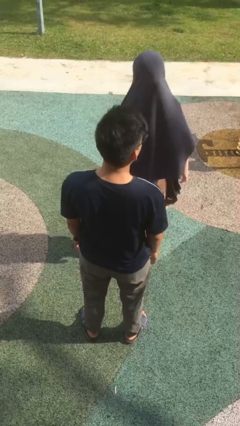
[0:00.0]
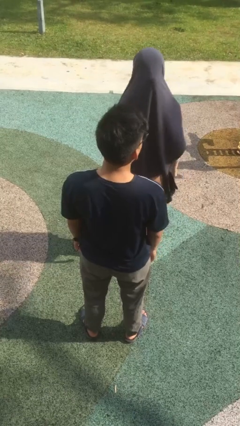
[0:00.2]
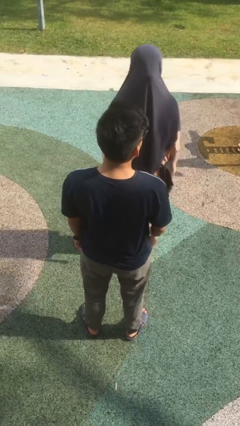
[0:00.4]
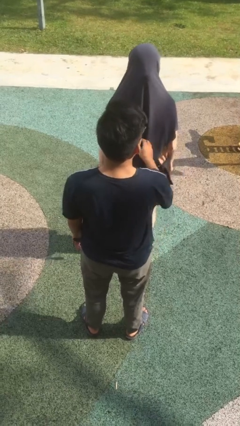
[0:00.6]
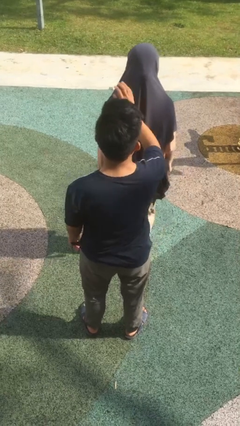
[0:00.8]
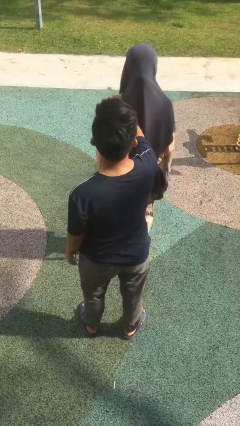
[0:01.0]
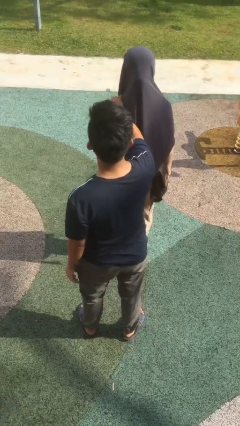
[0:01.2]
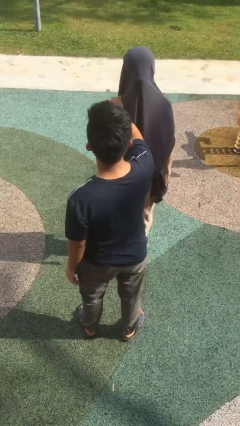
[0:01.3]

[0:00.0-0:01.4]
person grabs person by shoulder

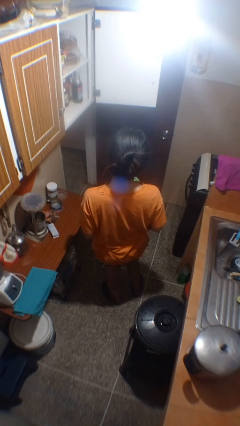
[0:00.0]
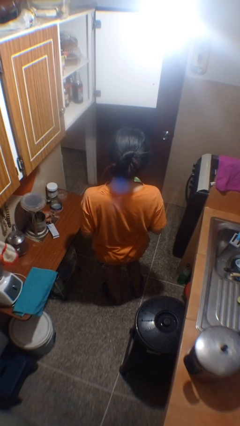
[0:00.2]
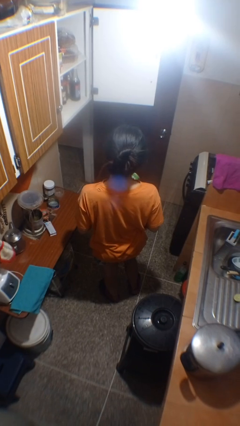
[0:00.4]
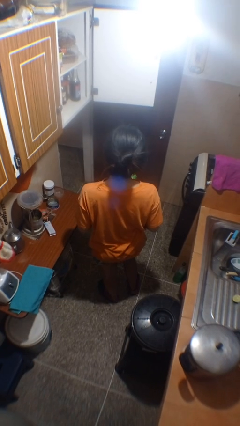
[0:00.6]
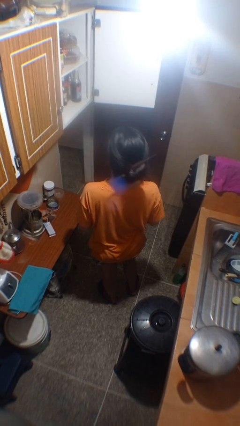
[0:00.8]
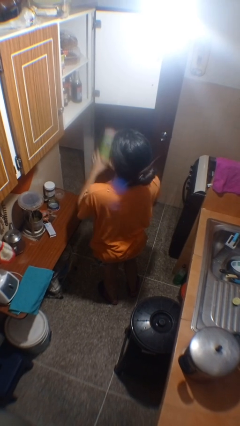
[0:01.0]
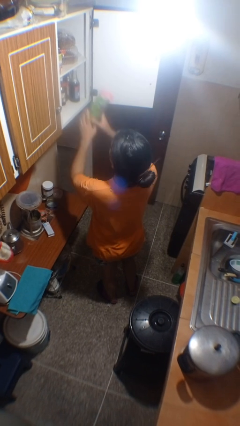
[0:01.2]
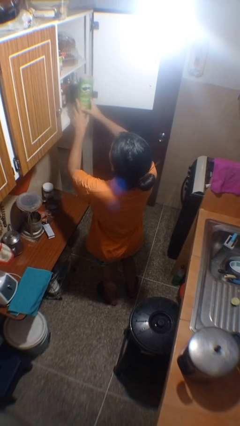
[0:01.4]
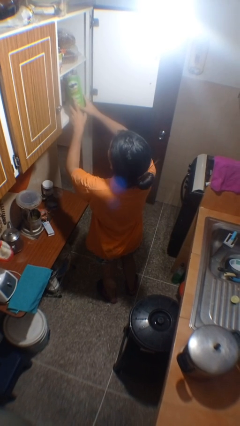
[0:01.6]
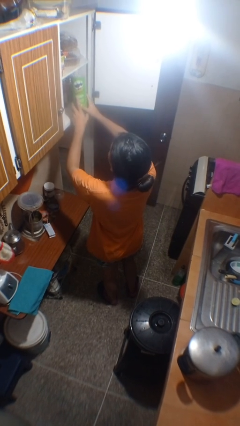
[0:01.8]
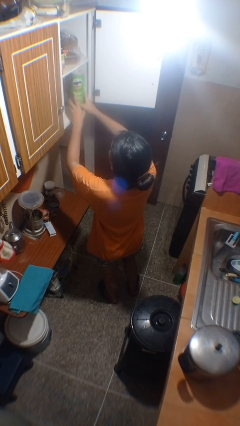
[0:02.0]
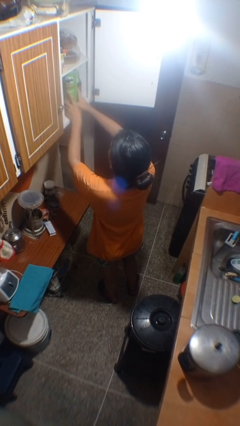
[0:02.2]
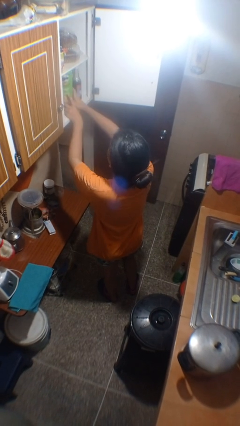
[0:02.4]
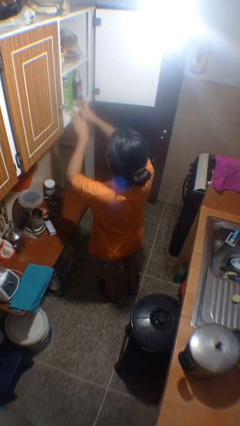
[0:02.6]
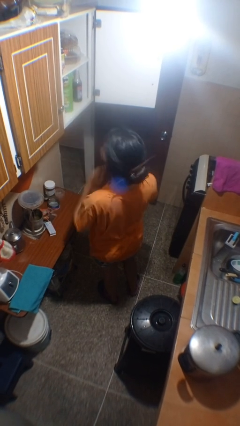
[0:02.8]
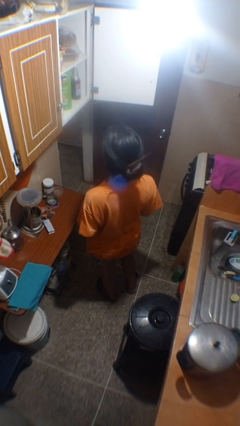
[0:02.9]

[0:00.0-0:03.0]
person puts object in cabinet

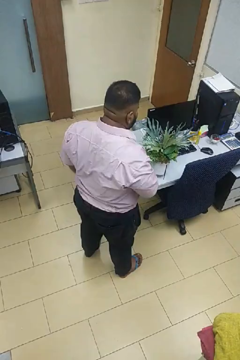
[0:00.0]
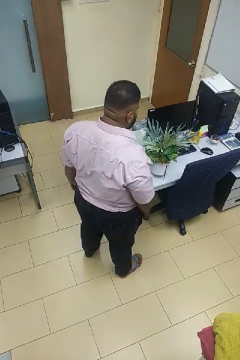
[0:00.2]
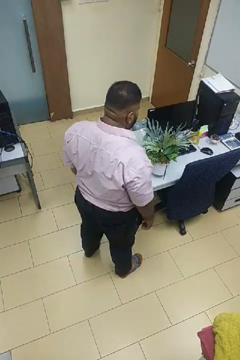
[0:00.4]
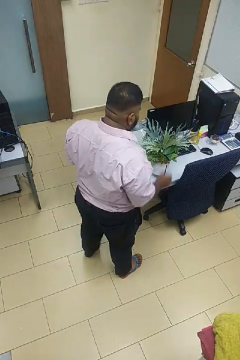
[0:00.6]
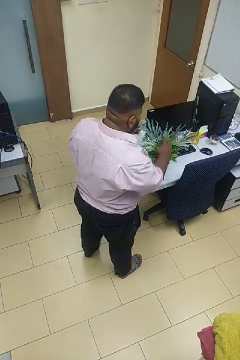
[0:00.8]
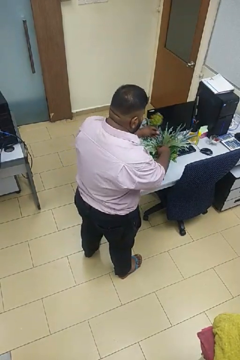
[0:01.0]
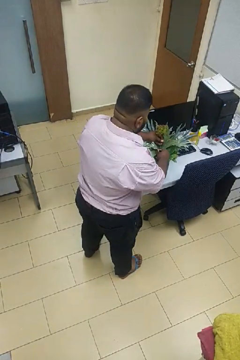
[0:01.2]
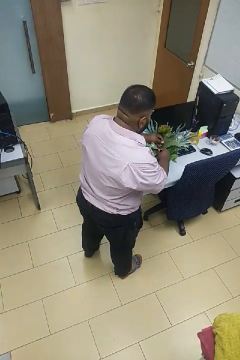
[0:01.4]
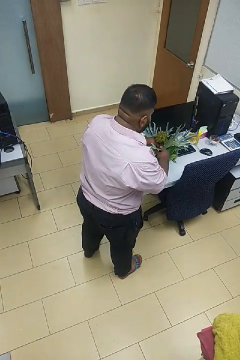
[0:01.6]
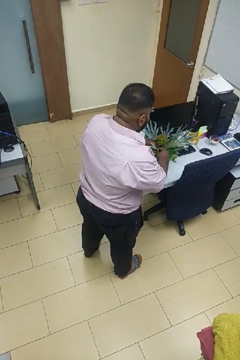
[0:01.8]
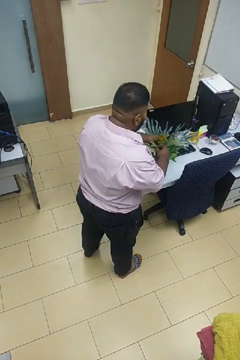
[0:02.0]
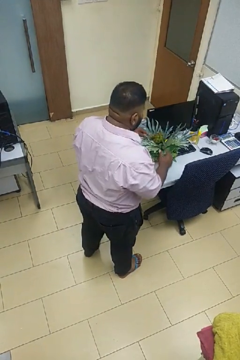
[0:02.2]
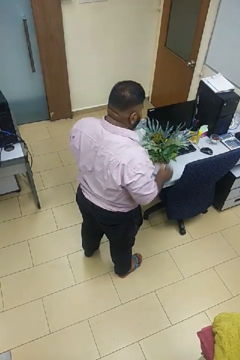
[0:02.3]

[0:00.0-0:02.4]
person arranges flowers in vase

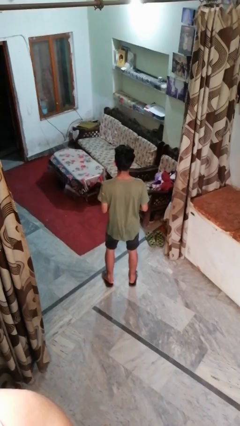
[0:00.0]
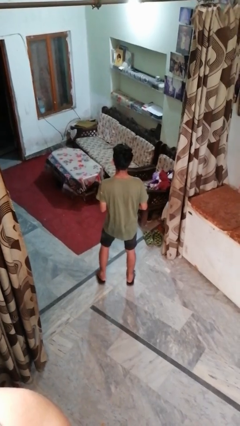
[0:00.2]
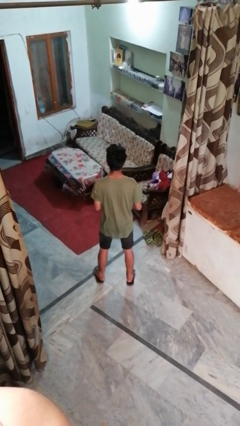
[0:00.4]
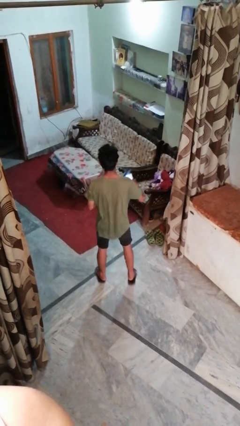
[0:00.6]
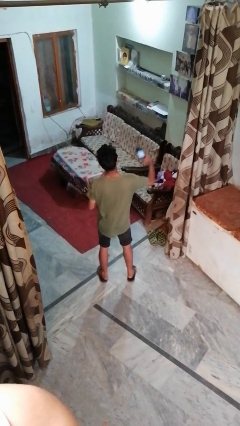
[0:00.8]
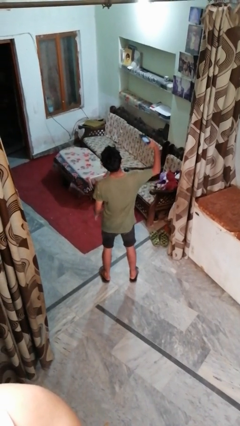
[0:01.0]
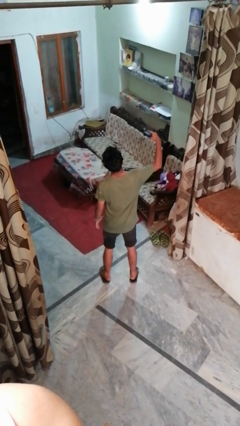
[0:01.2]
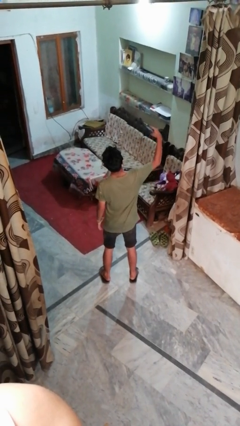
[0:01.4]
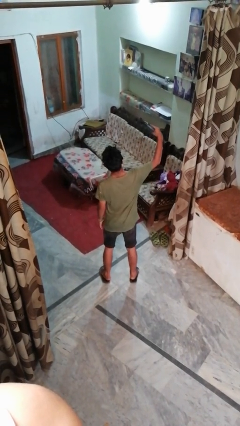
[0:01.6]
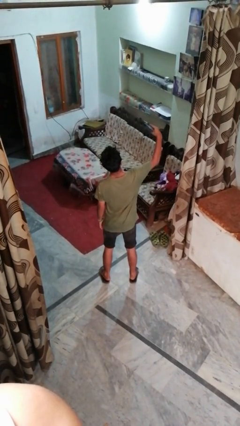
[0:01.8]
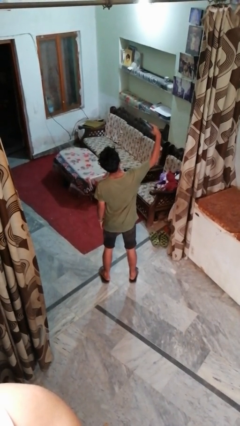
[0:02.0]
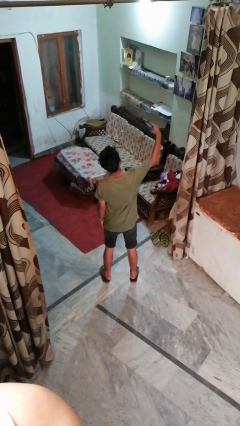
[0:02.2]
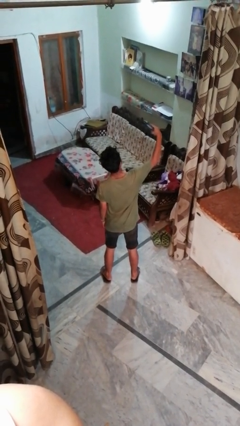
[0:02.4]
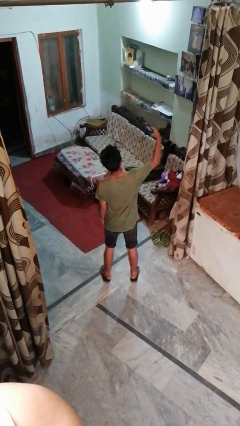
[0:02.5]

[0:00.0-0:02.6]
person takes selfie

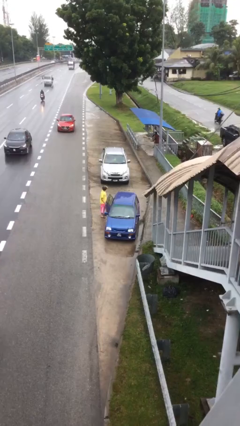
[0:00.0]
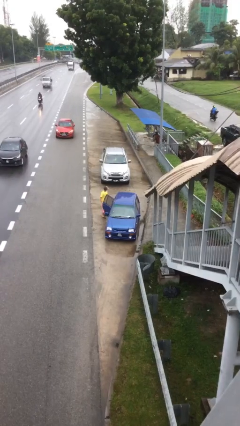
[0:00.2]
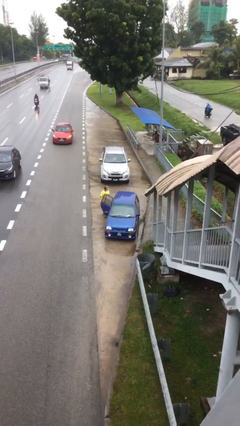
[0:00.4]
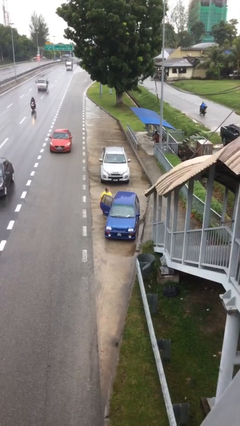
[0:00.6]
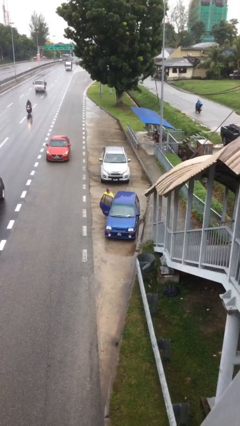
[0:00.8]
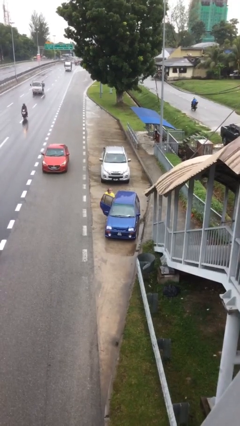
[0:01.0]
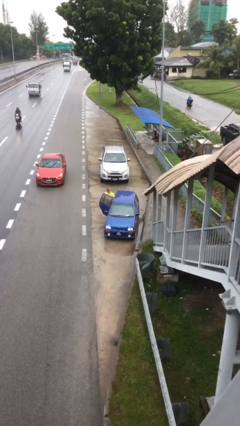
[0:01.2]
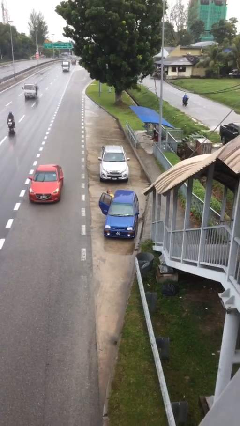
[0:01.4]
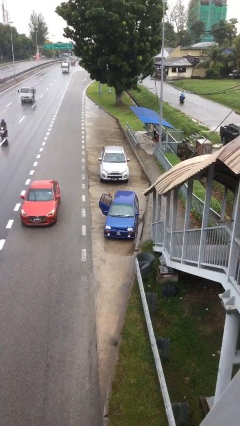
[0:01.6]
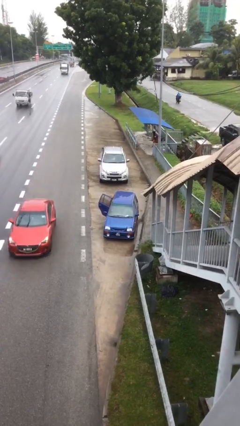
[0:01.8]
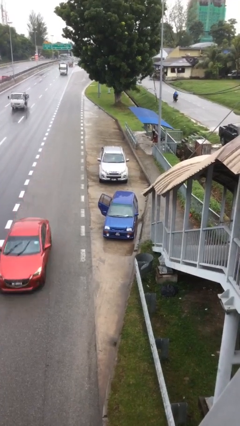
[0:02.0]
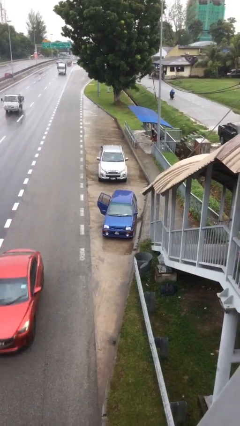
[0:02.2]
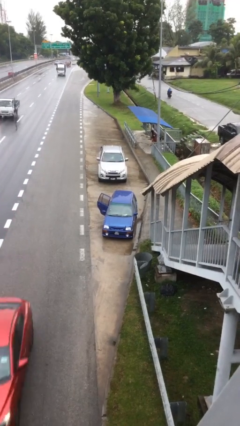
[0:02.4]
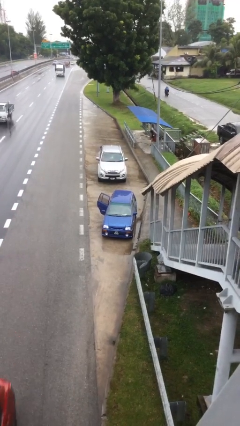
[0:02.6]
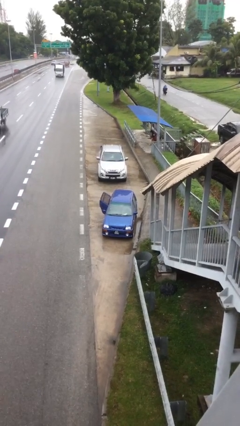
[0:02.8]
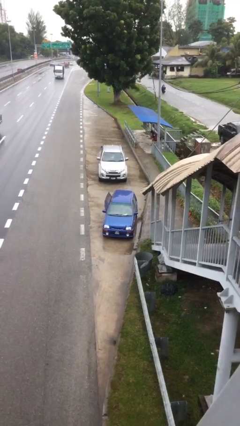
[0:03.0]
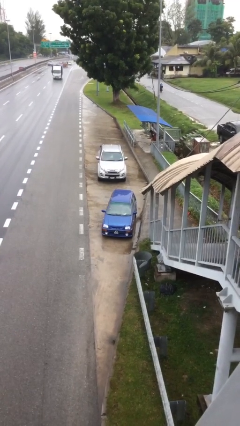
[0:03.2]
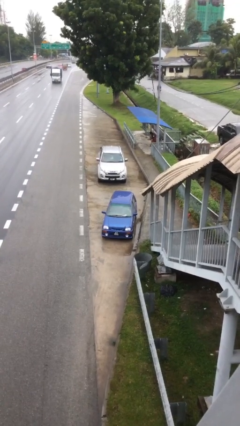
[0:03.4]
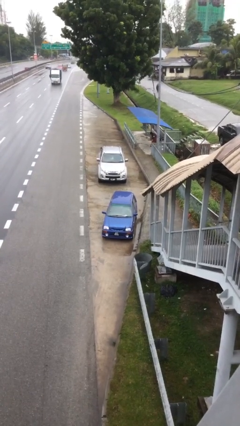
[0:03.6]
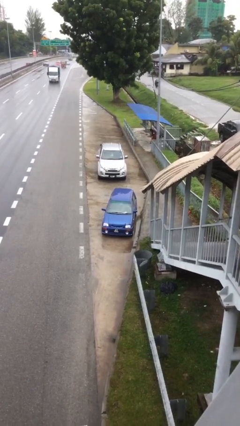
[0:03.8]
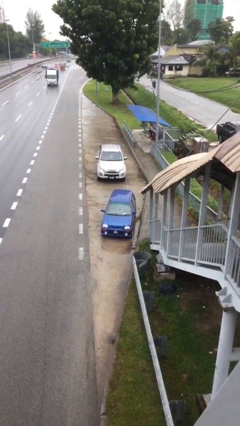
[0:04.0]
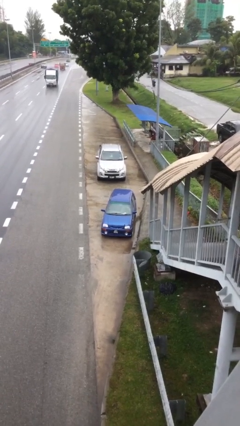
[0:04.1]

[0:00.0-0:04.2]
car picks up person

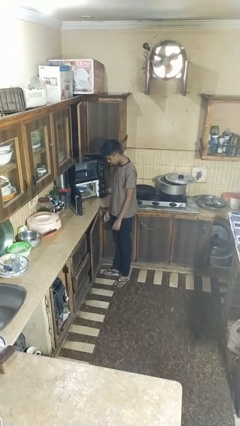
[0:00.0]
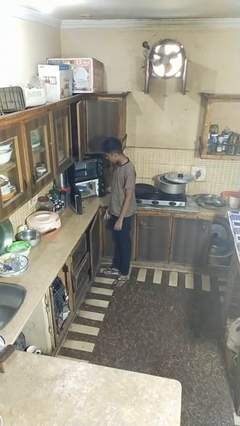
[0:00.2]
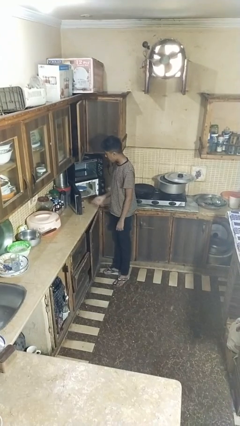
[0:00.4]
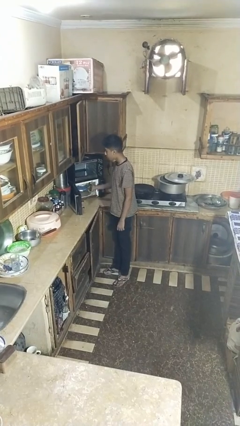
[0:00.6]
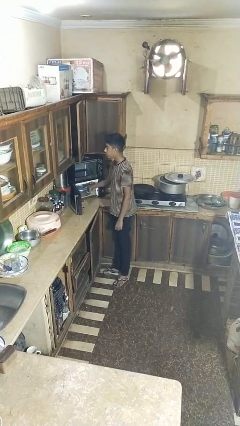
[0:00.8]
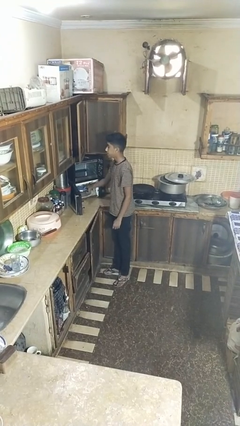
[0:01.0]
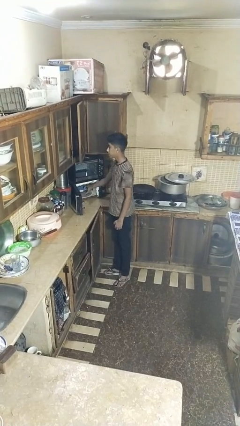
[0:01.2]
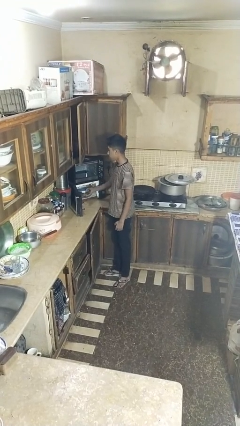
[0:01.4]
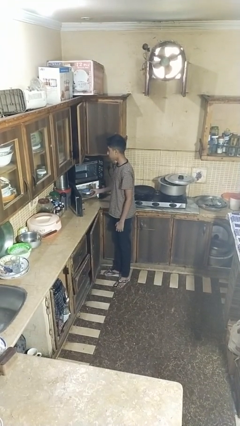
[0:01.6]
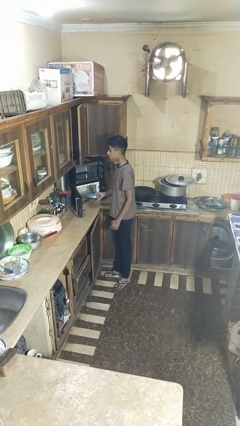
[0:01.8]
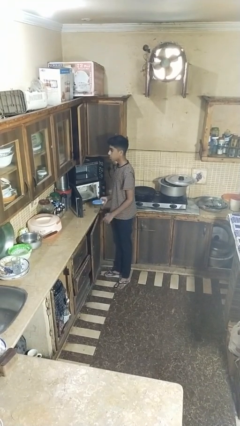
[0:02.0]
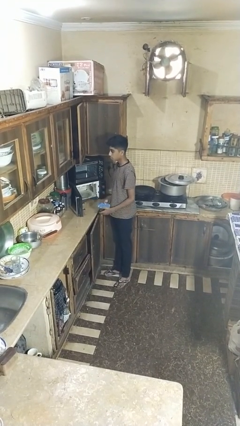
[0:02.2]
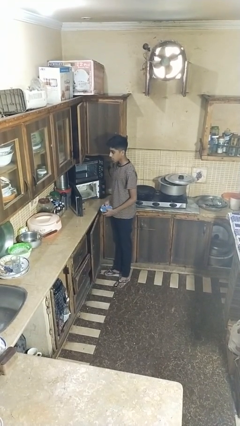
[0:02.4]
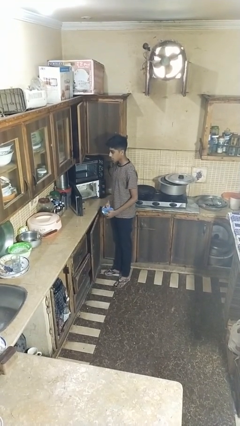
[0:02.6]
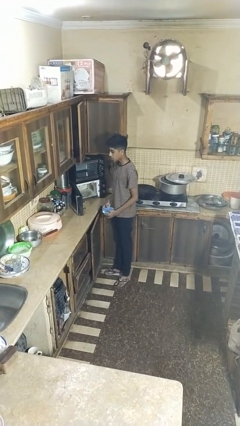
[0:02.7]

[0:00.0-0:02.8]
person takes object from microwave

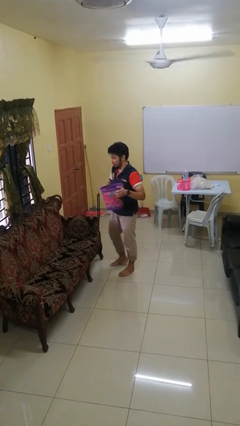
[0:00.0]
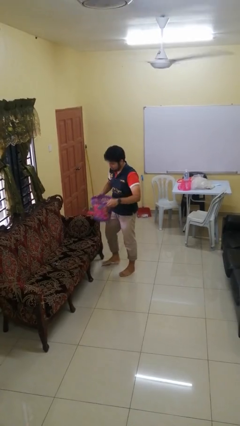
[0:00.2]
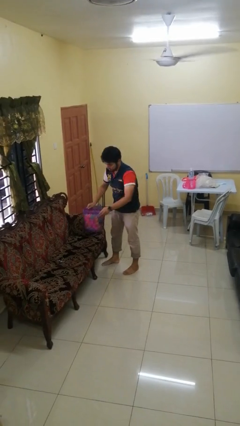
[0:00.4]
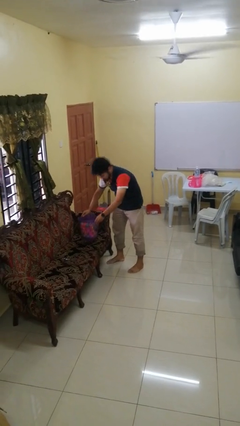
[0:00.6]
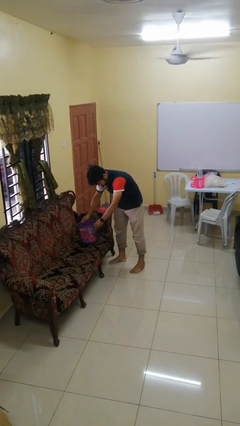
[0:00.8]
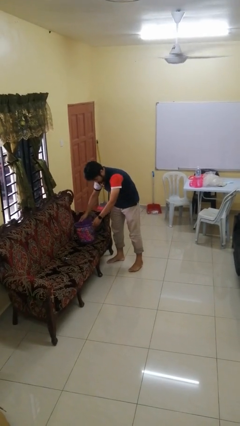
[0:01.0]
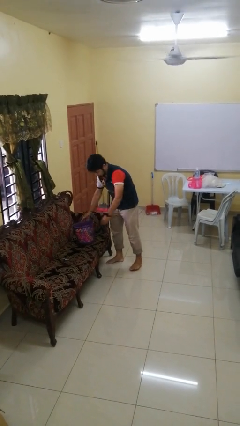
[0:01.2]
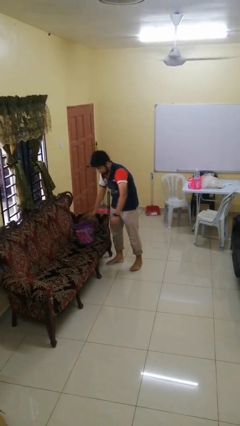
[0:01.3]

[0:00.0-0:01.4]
person puts down object on couch
